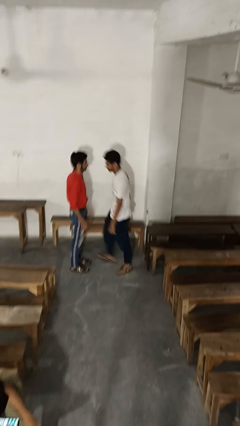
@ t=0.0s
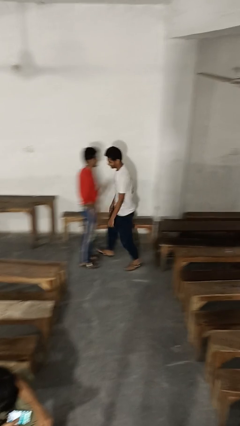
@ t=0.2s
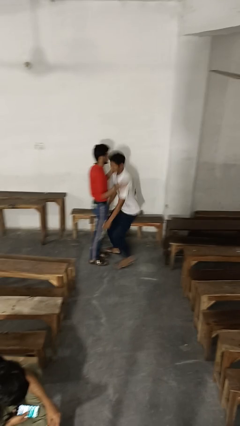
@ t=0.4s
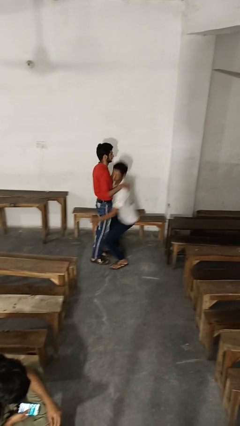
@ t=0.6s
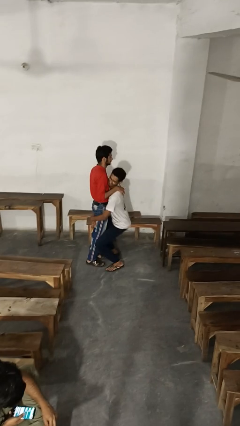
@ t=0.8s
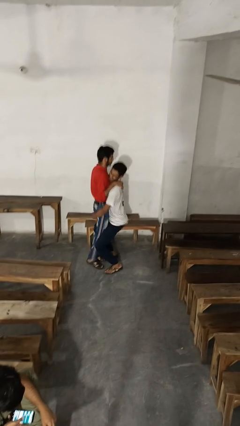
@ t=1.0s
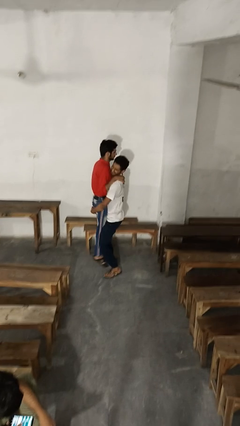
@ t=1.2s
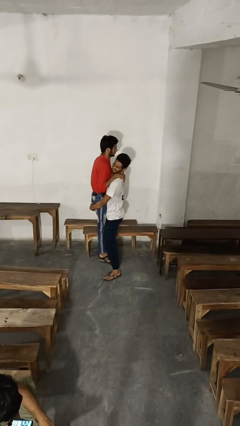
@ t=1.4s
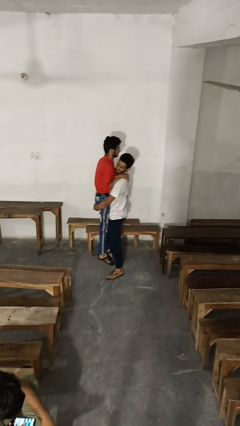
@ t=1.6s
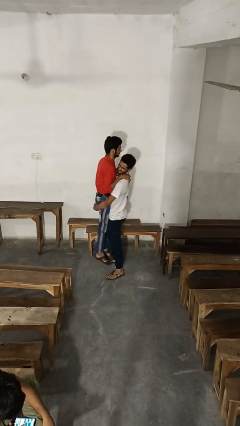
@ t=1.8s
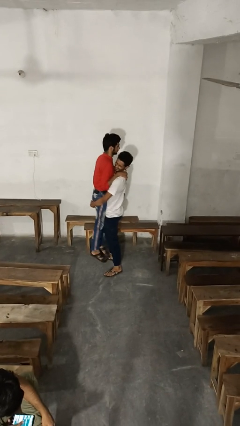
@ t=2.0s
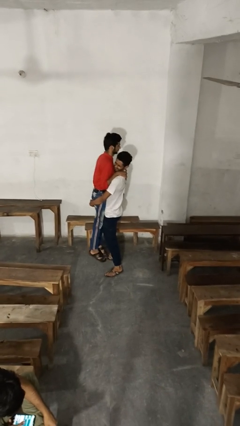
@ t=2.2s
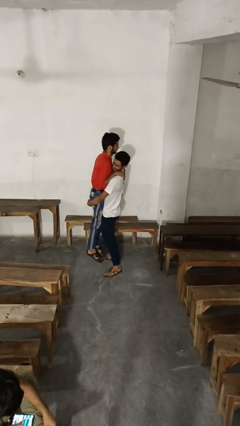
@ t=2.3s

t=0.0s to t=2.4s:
person picks up person

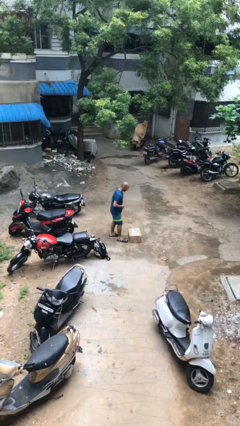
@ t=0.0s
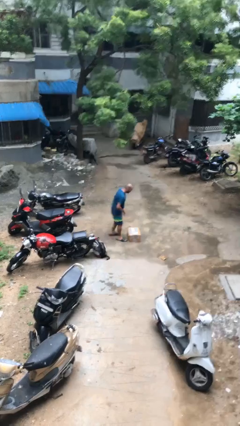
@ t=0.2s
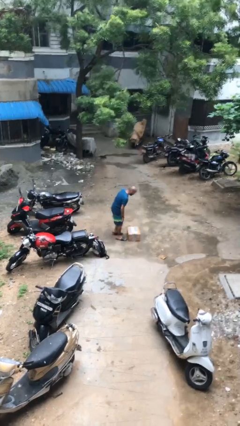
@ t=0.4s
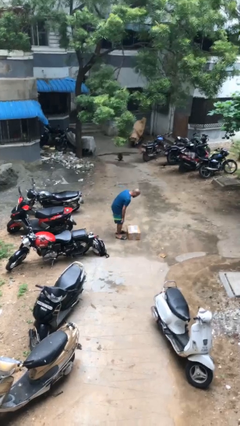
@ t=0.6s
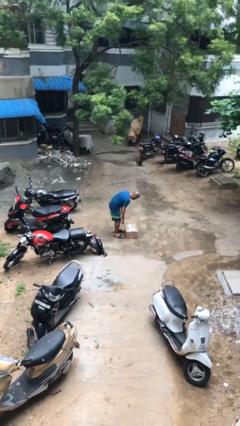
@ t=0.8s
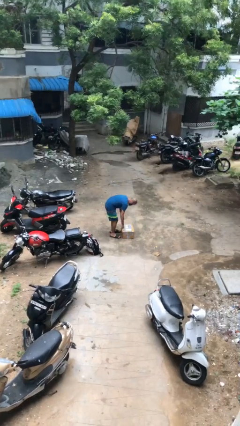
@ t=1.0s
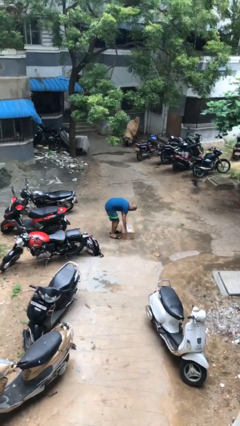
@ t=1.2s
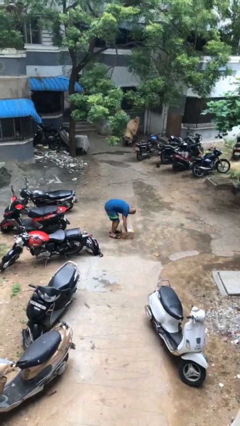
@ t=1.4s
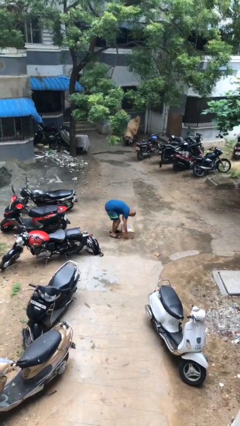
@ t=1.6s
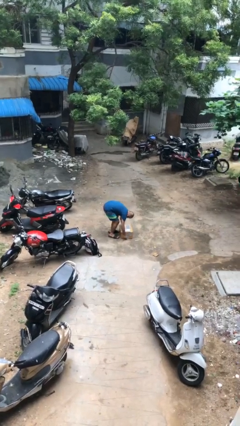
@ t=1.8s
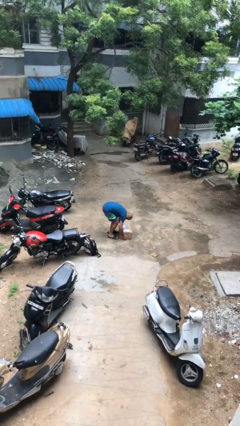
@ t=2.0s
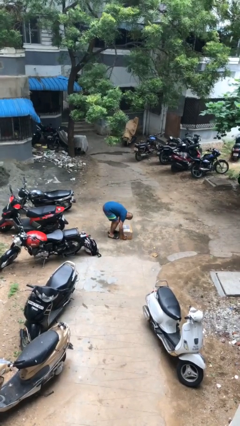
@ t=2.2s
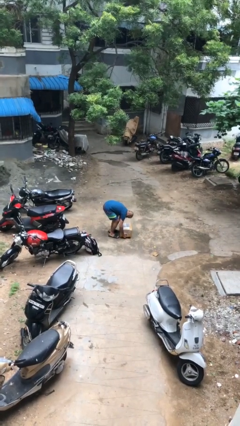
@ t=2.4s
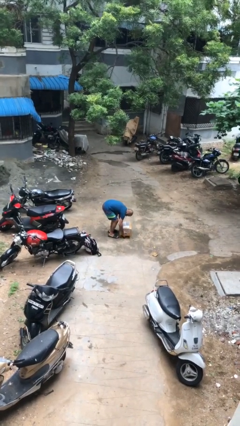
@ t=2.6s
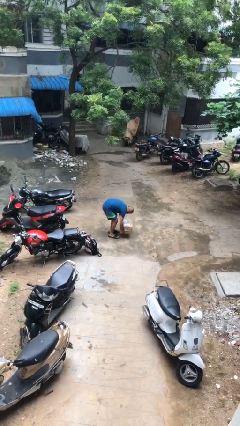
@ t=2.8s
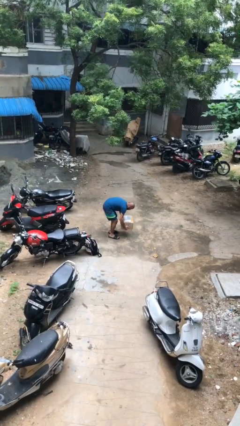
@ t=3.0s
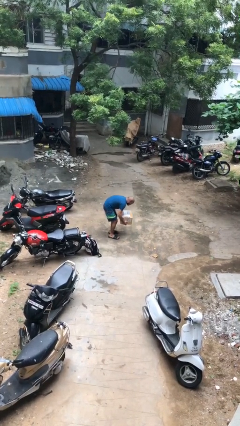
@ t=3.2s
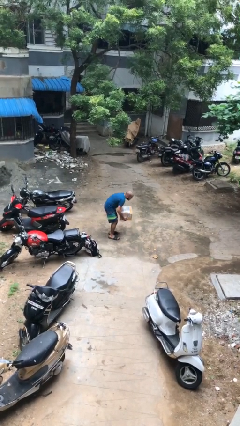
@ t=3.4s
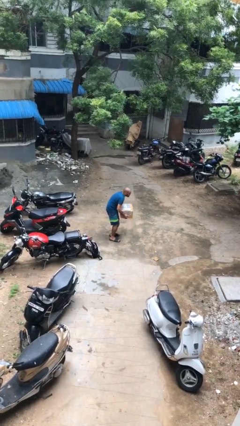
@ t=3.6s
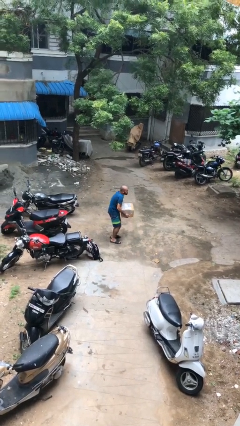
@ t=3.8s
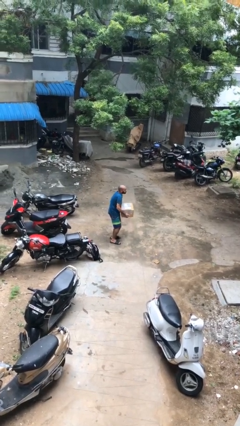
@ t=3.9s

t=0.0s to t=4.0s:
person picks up object from floor

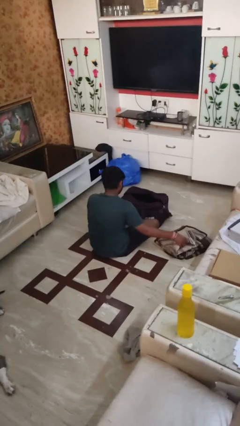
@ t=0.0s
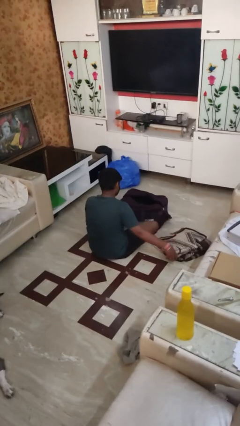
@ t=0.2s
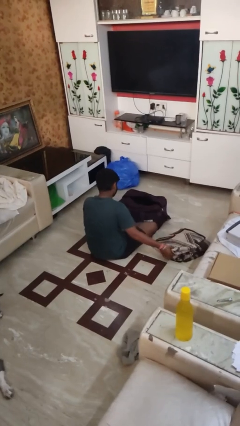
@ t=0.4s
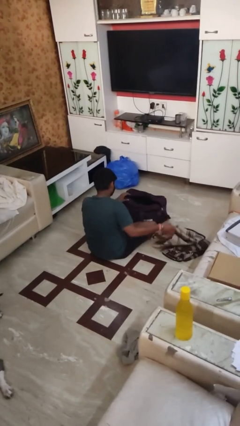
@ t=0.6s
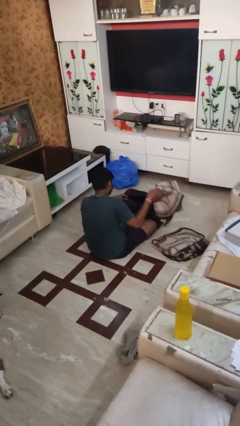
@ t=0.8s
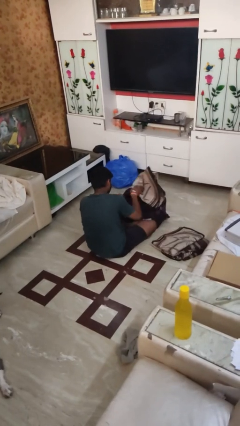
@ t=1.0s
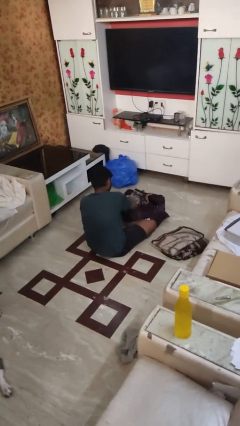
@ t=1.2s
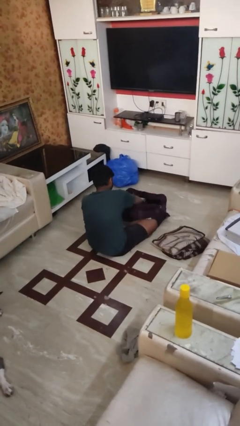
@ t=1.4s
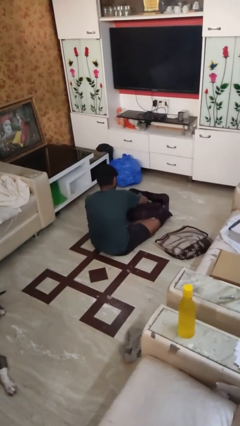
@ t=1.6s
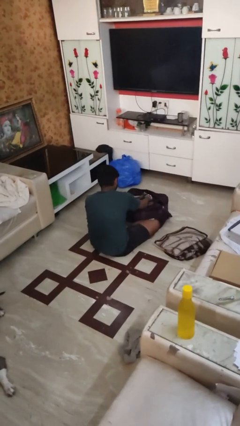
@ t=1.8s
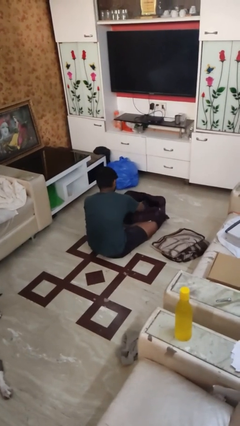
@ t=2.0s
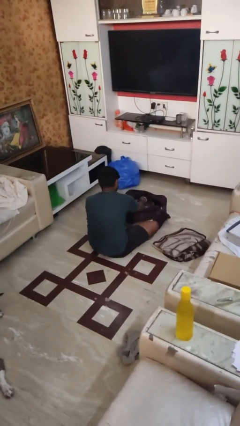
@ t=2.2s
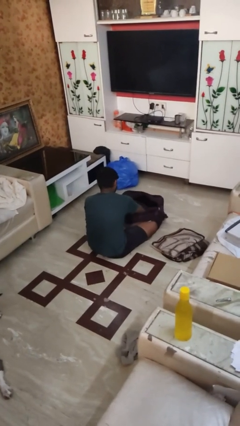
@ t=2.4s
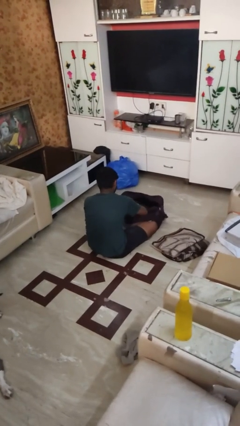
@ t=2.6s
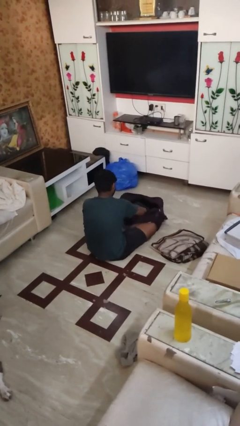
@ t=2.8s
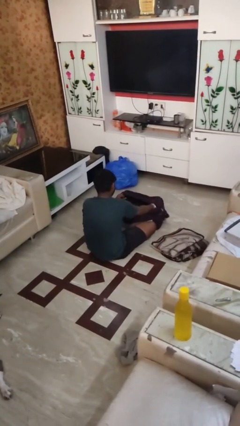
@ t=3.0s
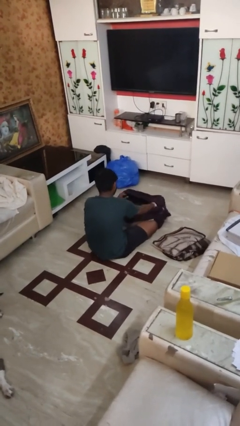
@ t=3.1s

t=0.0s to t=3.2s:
person loads clothes into suitcase

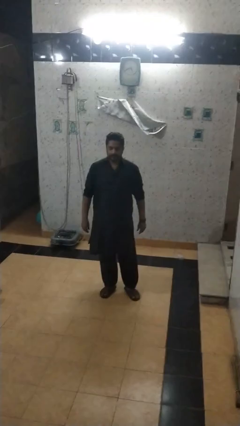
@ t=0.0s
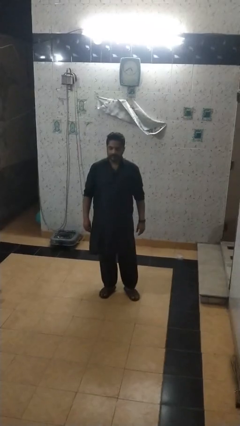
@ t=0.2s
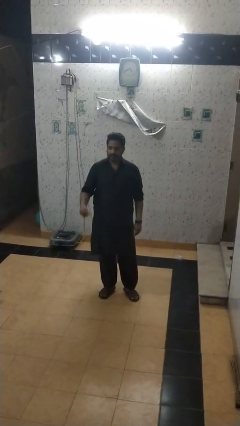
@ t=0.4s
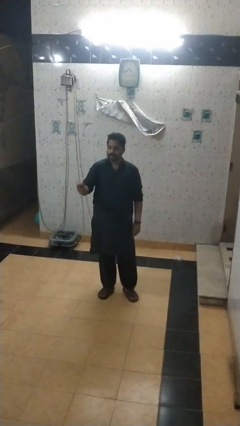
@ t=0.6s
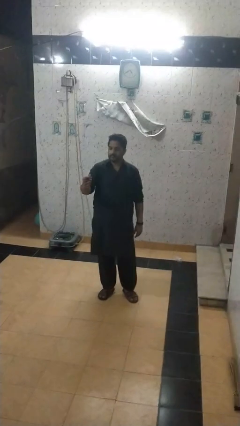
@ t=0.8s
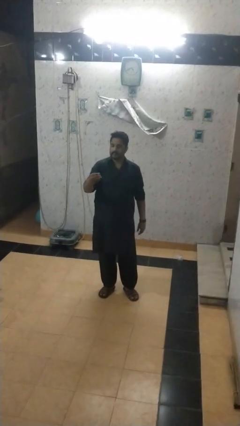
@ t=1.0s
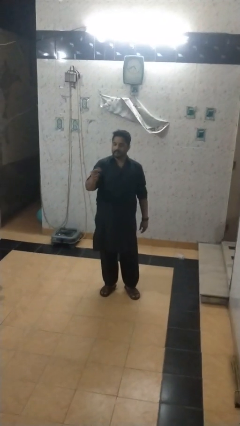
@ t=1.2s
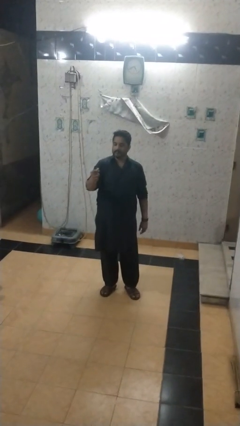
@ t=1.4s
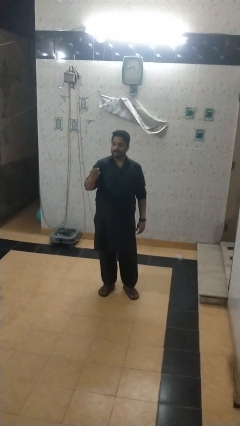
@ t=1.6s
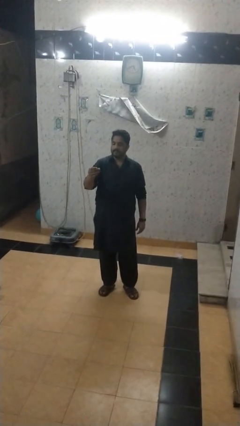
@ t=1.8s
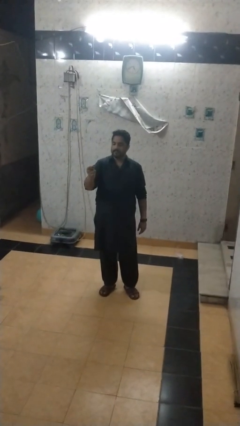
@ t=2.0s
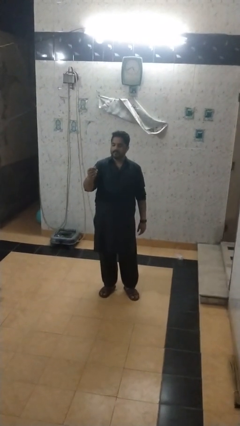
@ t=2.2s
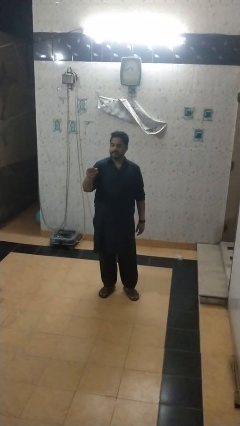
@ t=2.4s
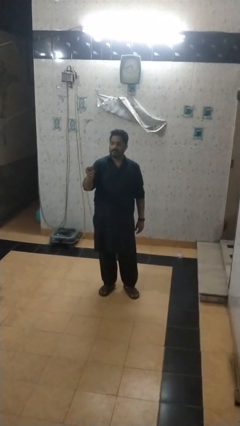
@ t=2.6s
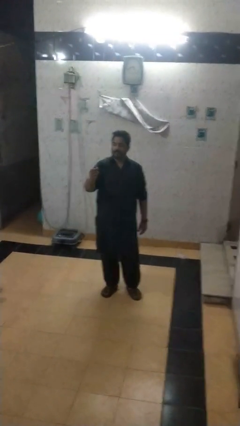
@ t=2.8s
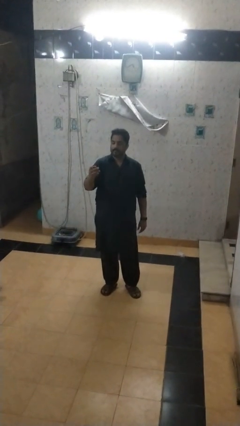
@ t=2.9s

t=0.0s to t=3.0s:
person snaps fingers

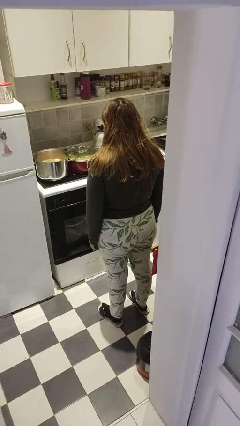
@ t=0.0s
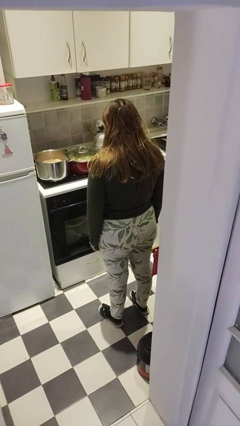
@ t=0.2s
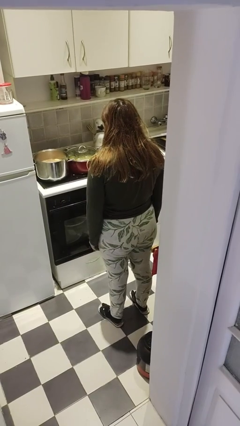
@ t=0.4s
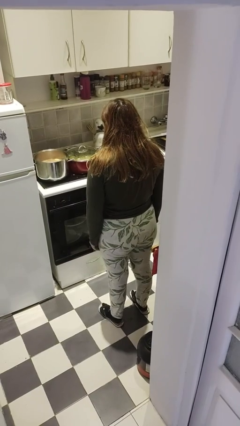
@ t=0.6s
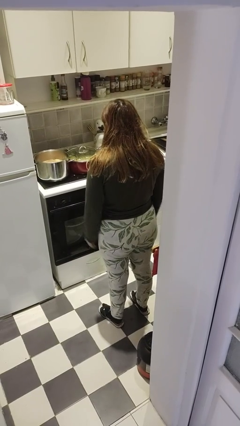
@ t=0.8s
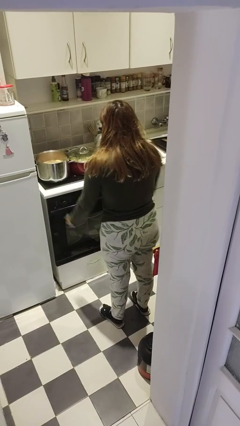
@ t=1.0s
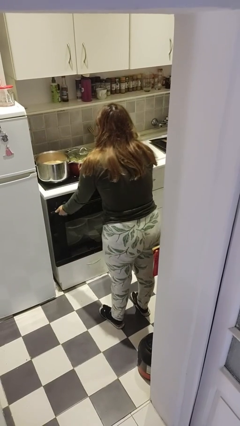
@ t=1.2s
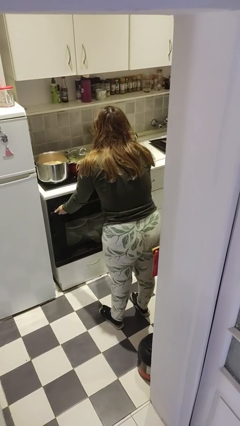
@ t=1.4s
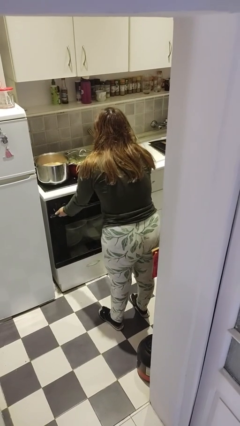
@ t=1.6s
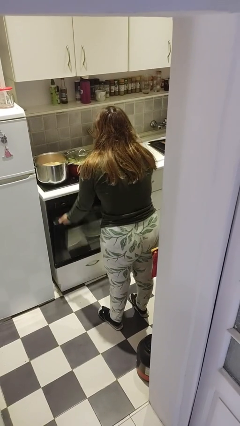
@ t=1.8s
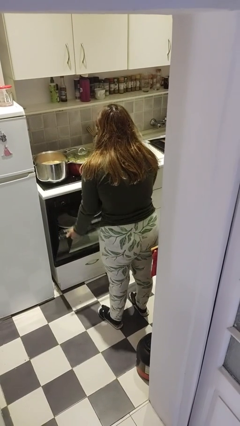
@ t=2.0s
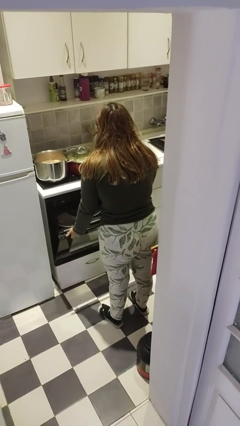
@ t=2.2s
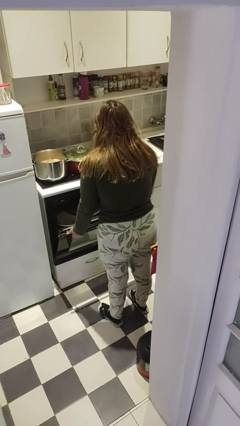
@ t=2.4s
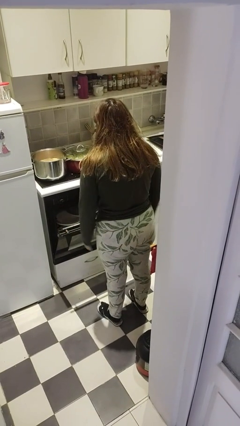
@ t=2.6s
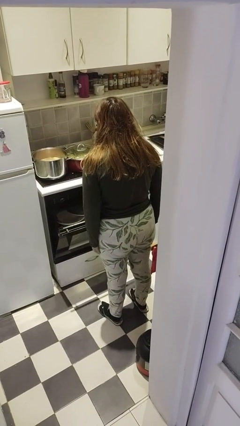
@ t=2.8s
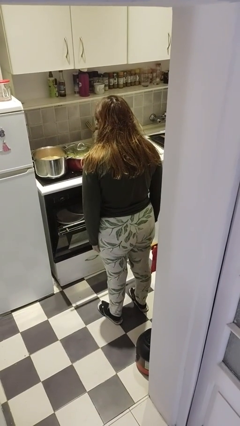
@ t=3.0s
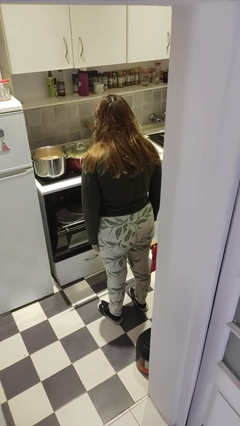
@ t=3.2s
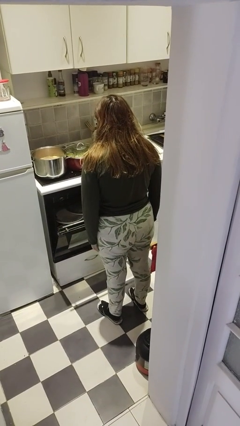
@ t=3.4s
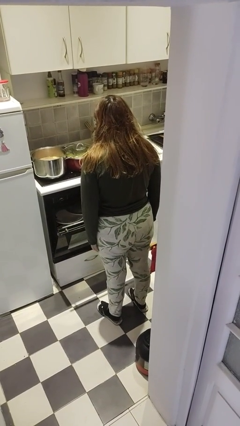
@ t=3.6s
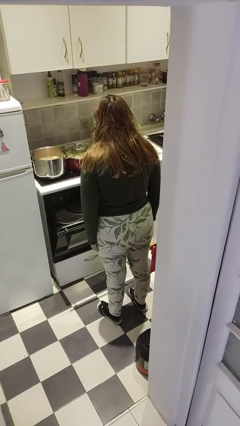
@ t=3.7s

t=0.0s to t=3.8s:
person opens dishwasher

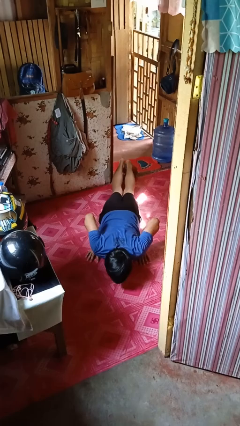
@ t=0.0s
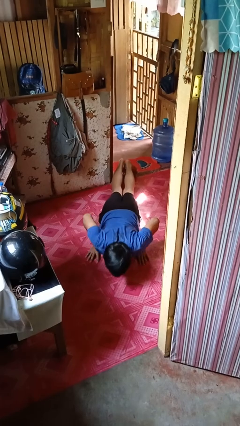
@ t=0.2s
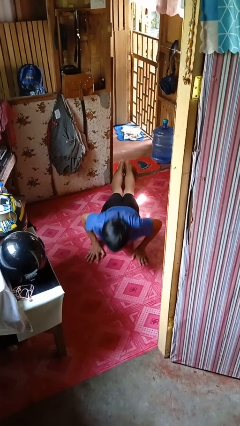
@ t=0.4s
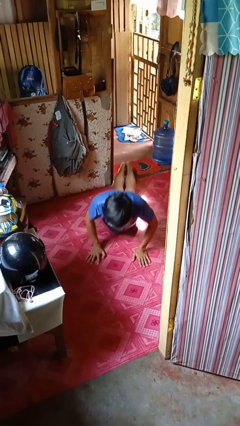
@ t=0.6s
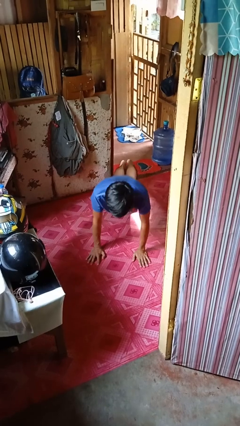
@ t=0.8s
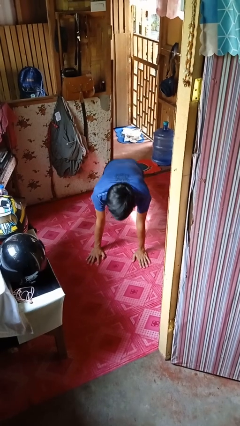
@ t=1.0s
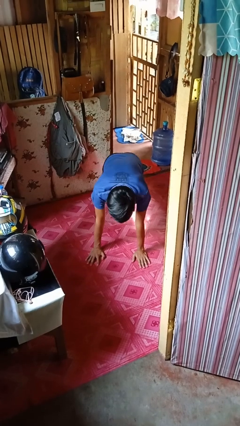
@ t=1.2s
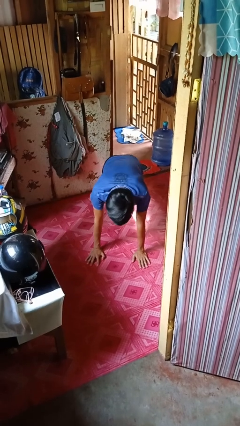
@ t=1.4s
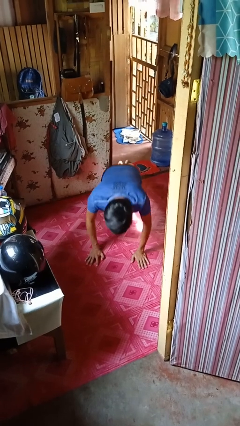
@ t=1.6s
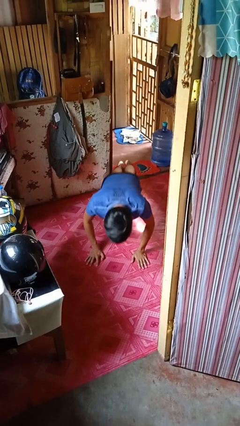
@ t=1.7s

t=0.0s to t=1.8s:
person exercises with pushup
